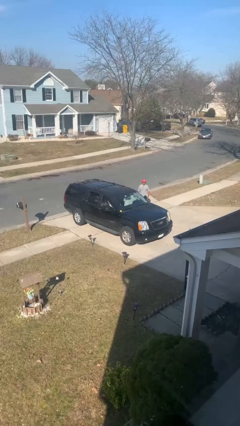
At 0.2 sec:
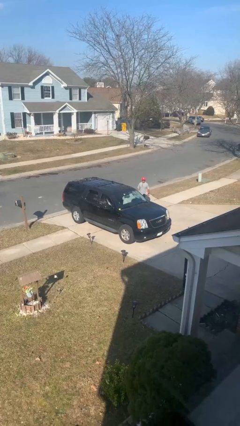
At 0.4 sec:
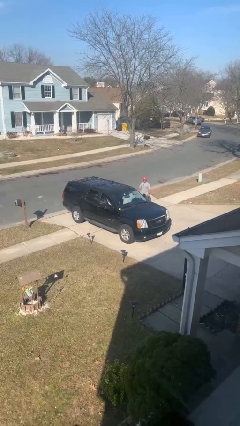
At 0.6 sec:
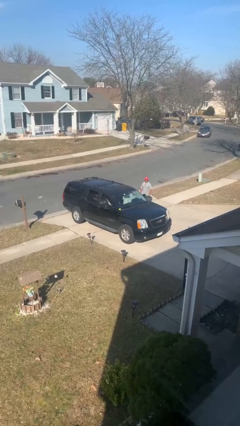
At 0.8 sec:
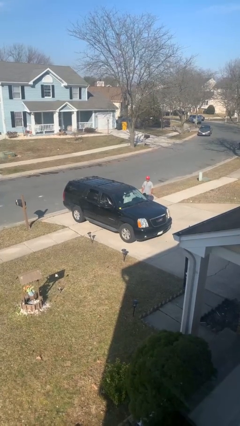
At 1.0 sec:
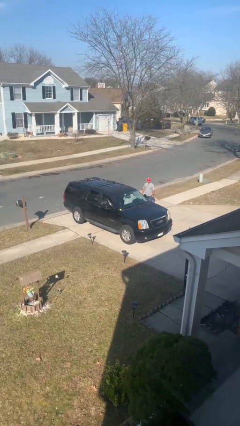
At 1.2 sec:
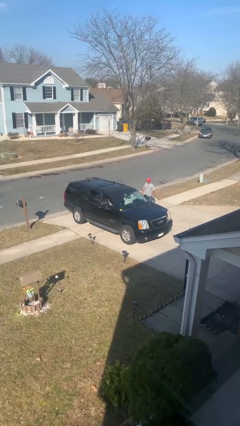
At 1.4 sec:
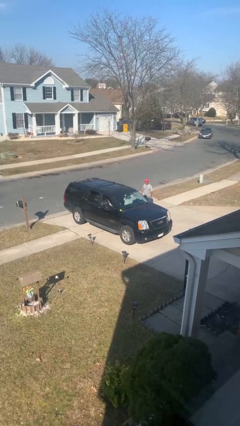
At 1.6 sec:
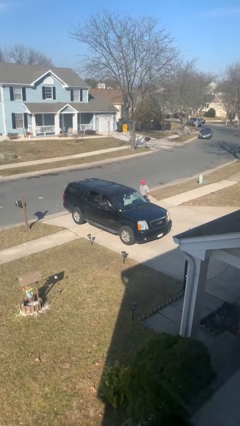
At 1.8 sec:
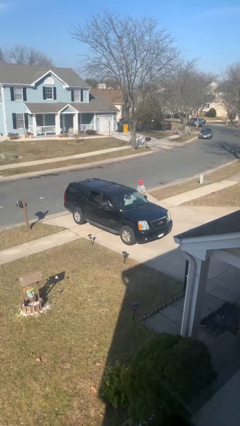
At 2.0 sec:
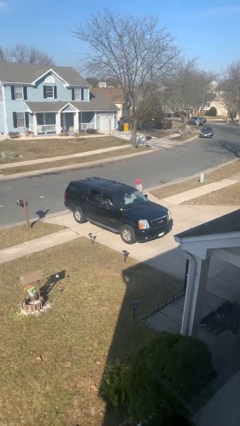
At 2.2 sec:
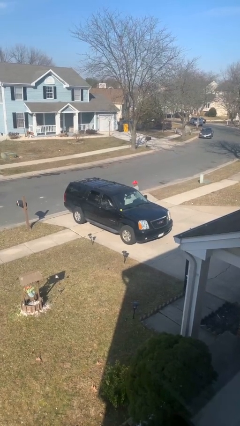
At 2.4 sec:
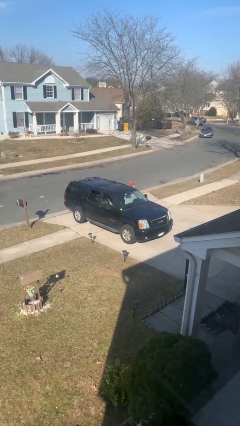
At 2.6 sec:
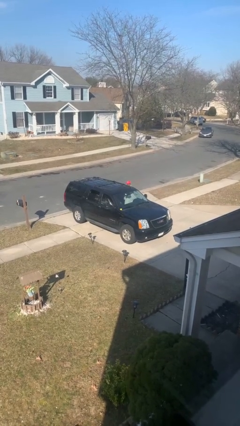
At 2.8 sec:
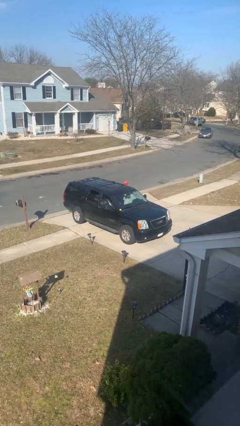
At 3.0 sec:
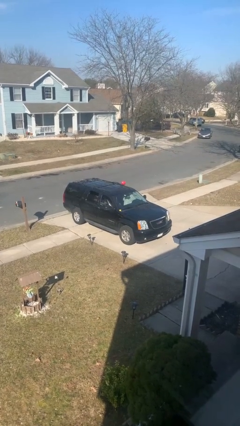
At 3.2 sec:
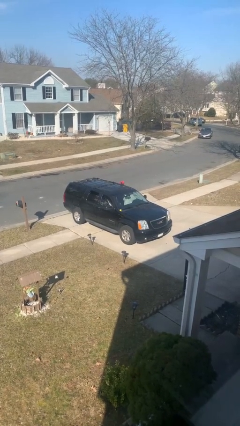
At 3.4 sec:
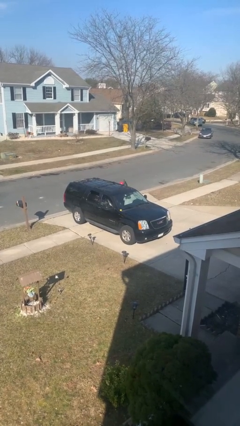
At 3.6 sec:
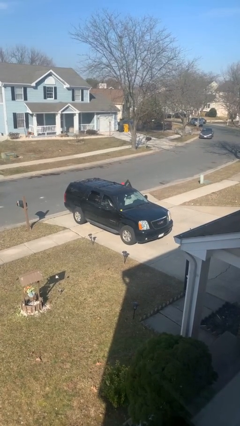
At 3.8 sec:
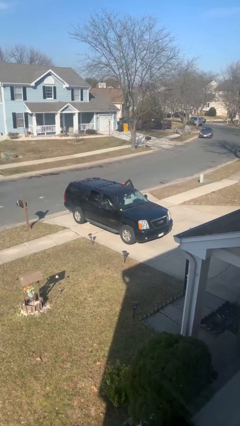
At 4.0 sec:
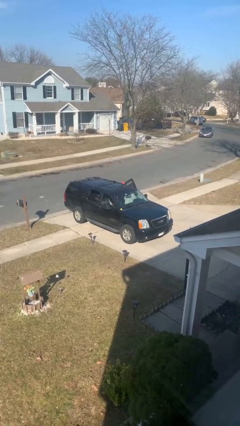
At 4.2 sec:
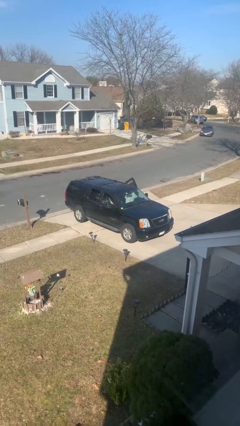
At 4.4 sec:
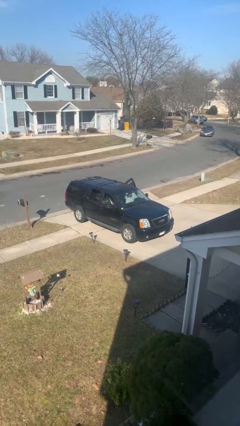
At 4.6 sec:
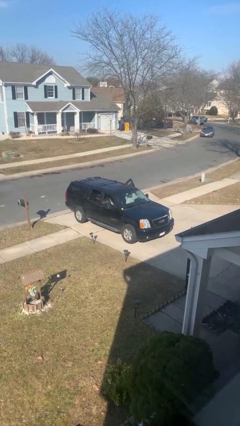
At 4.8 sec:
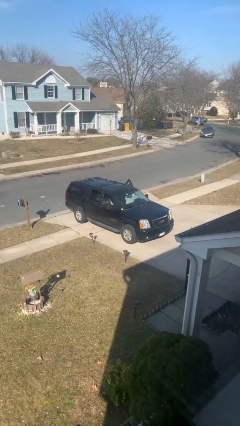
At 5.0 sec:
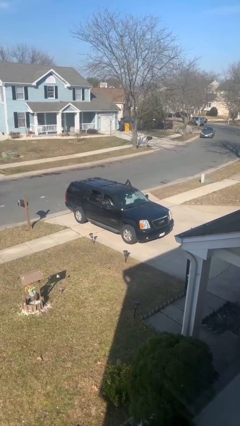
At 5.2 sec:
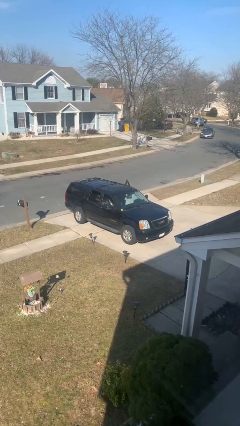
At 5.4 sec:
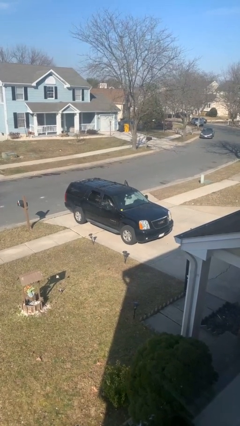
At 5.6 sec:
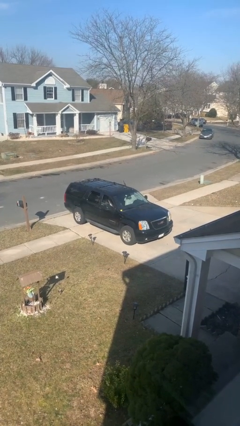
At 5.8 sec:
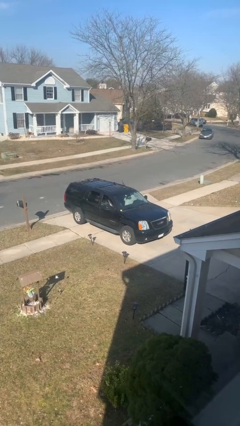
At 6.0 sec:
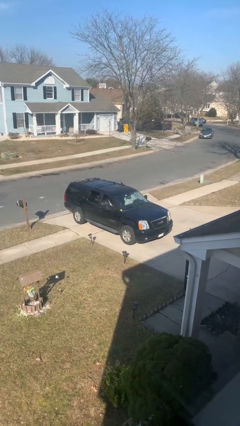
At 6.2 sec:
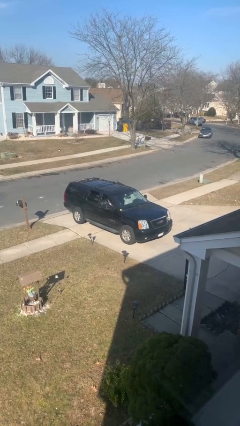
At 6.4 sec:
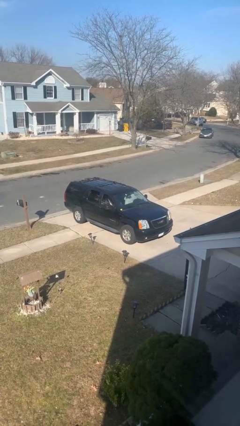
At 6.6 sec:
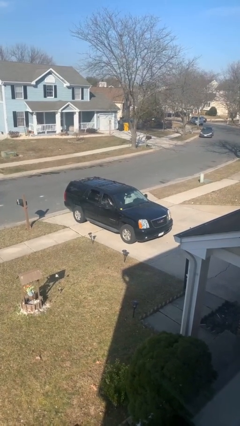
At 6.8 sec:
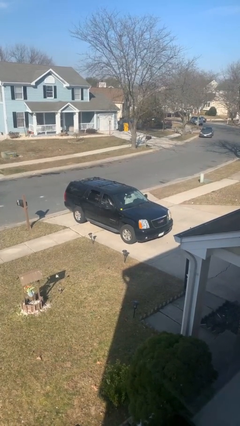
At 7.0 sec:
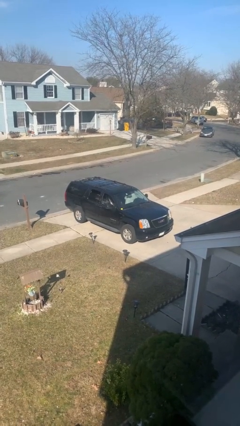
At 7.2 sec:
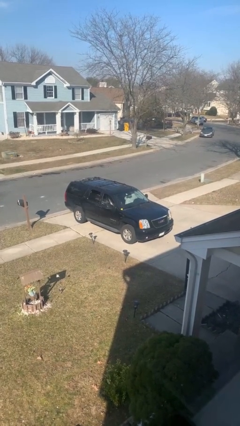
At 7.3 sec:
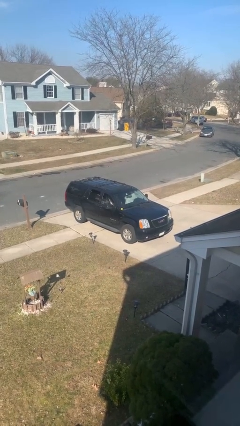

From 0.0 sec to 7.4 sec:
car picks up person

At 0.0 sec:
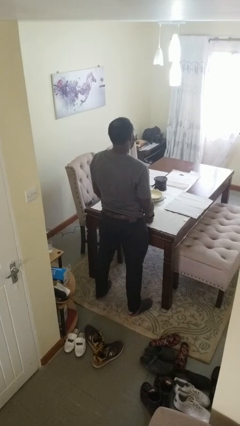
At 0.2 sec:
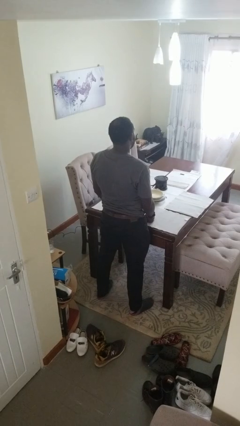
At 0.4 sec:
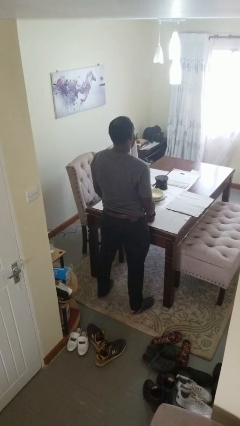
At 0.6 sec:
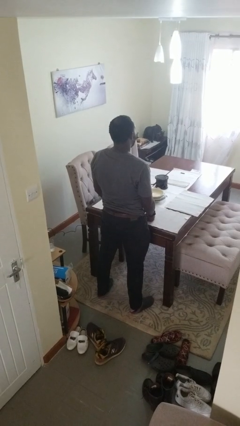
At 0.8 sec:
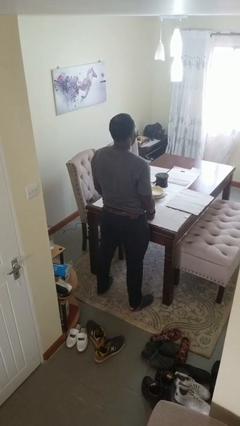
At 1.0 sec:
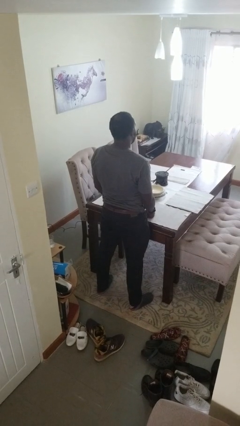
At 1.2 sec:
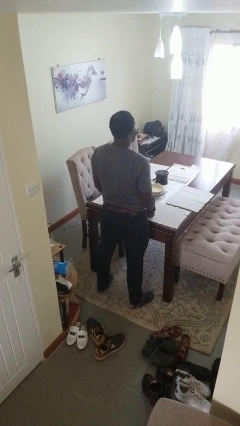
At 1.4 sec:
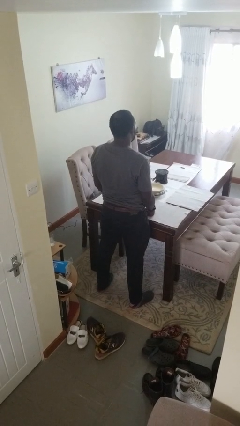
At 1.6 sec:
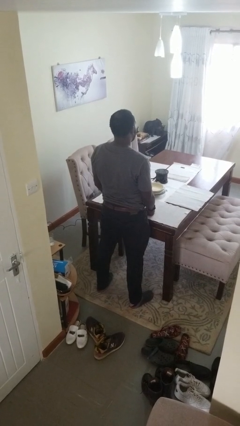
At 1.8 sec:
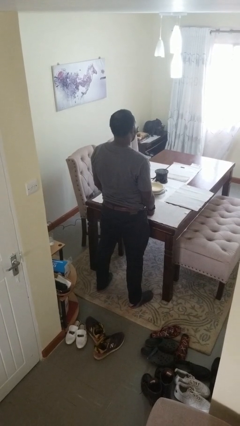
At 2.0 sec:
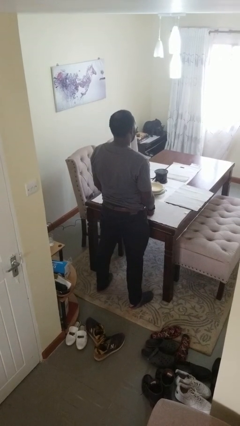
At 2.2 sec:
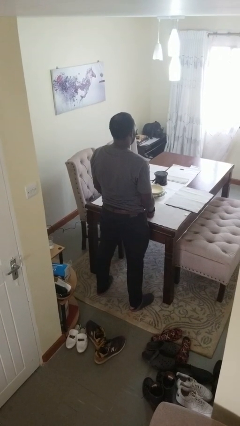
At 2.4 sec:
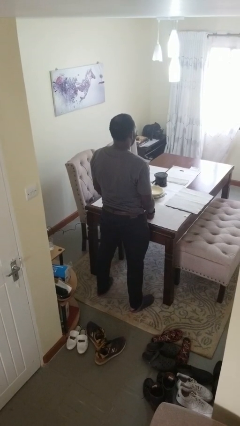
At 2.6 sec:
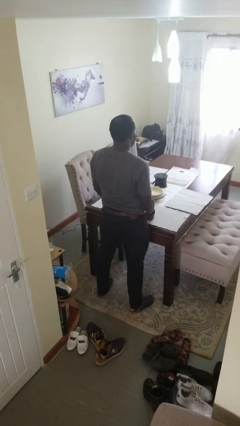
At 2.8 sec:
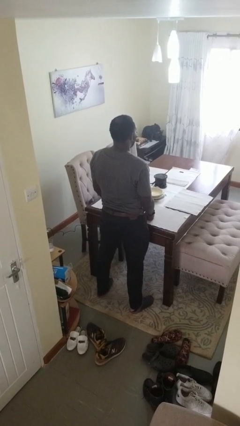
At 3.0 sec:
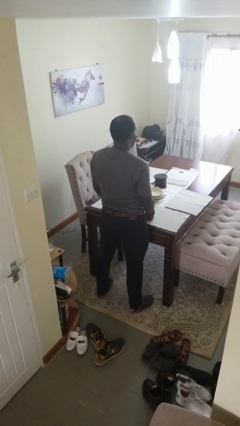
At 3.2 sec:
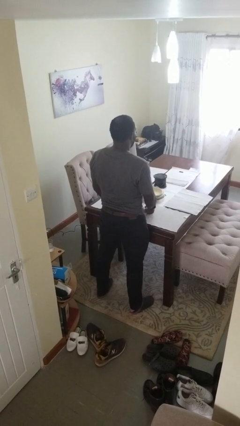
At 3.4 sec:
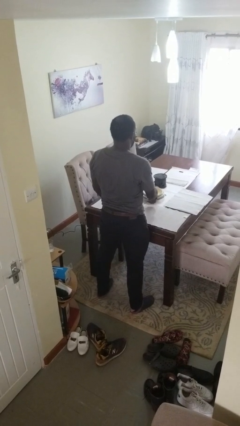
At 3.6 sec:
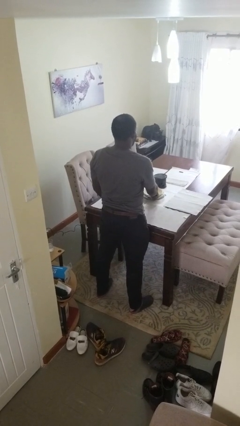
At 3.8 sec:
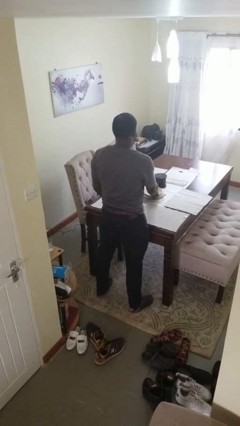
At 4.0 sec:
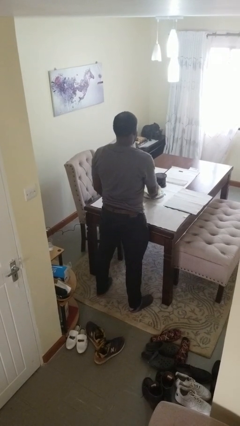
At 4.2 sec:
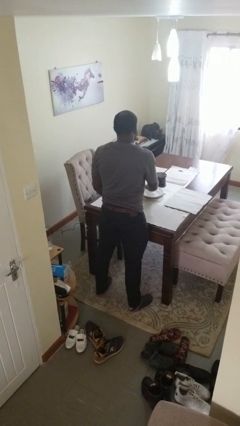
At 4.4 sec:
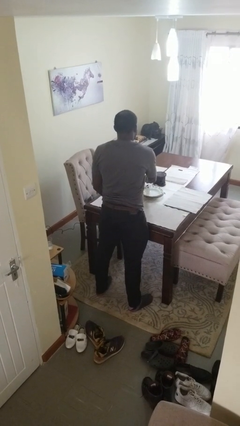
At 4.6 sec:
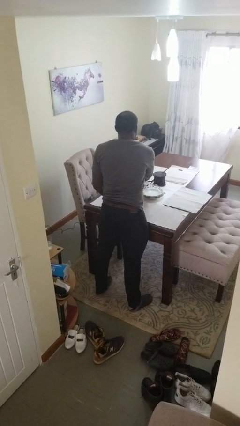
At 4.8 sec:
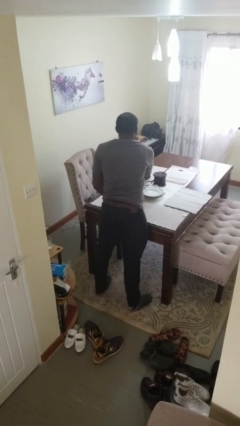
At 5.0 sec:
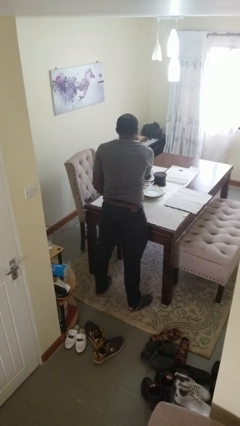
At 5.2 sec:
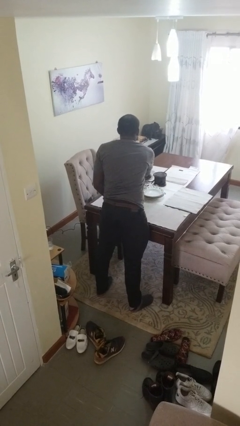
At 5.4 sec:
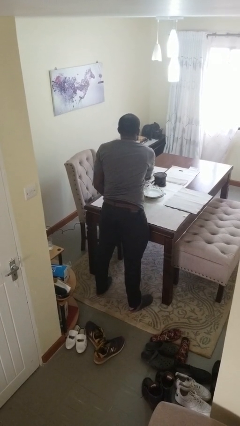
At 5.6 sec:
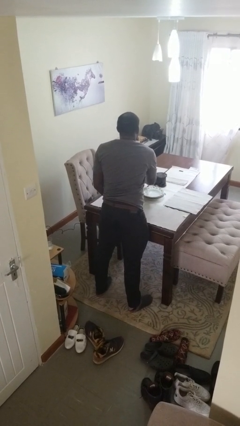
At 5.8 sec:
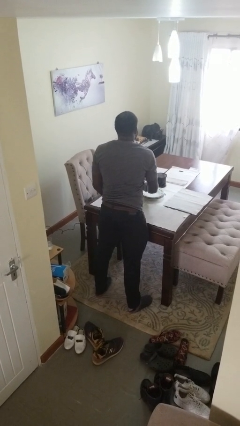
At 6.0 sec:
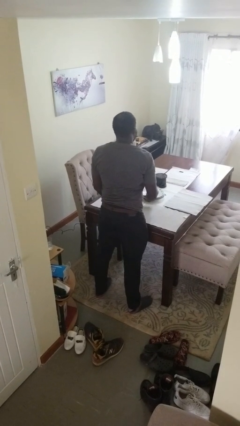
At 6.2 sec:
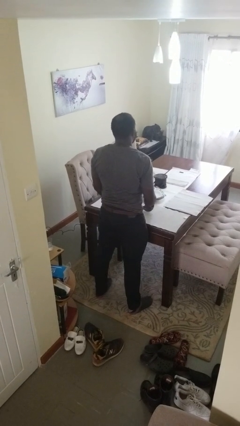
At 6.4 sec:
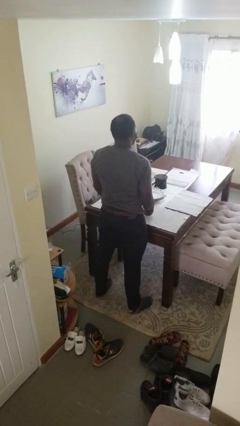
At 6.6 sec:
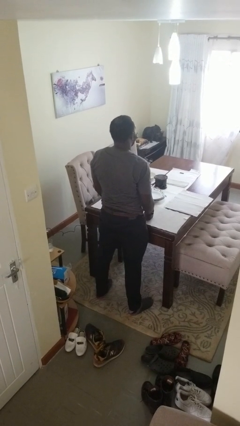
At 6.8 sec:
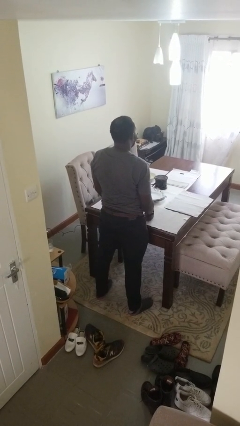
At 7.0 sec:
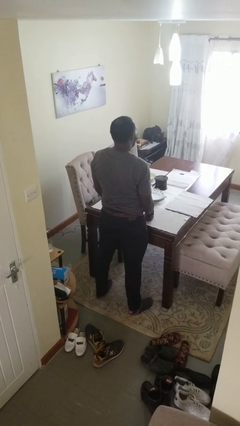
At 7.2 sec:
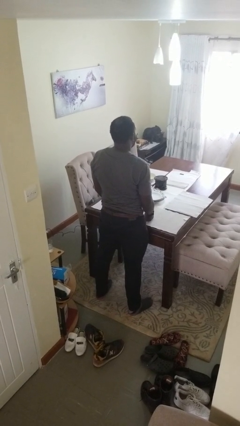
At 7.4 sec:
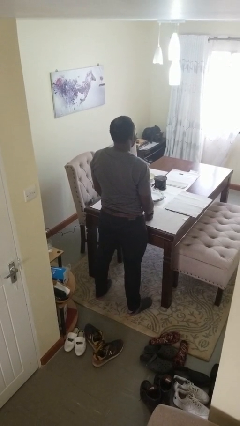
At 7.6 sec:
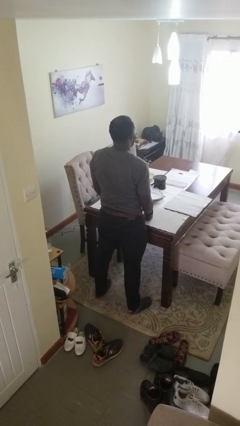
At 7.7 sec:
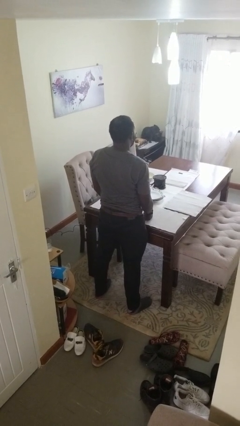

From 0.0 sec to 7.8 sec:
person sets table

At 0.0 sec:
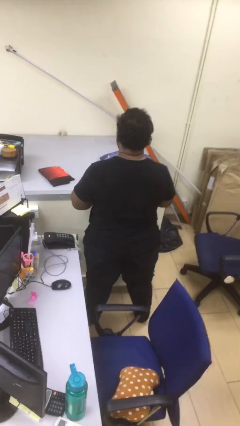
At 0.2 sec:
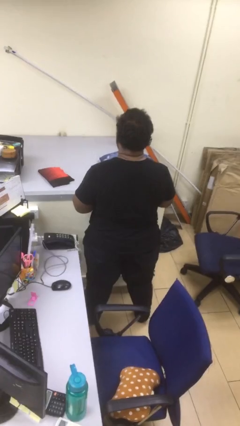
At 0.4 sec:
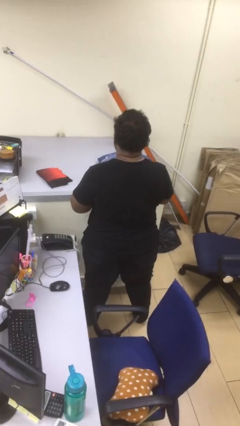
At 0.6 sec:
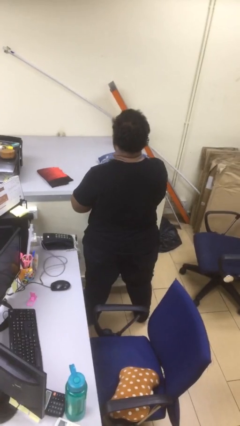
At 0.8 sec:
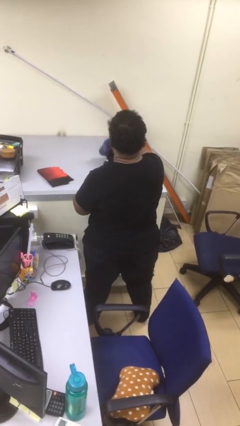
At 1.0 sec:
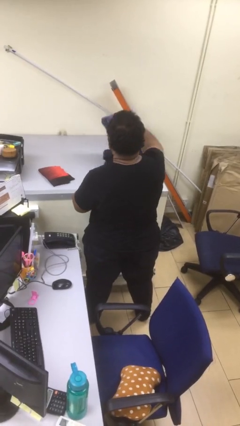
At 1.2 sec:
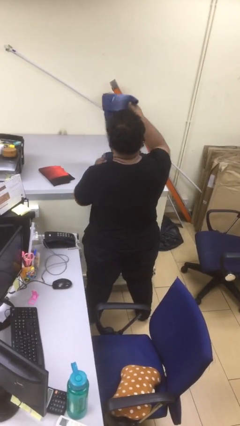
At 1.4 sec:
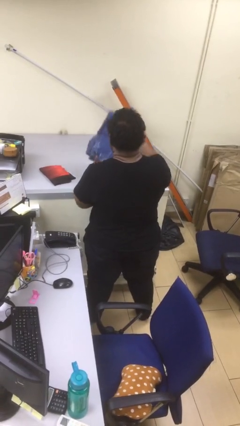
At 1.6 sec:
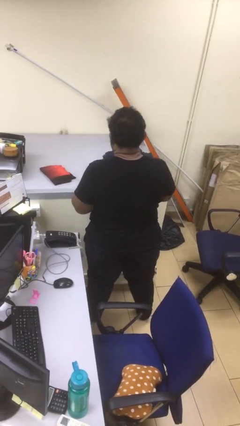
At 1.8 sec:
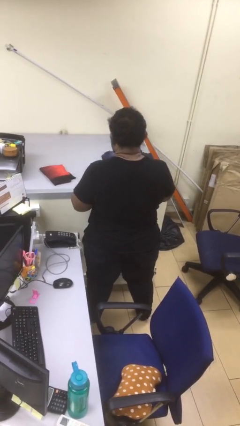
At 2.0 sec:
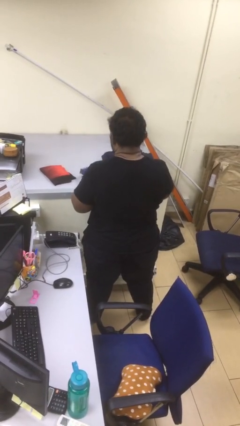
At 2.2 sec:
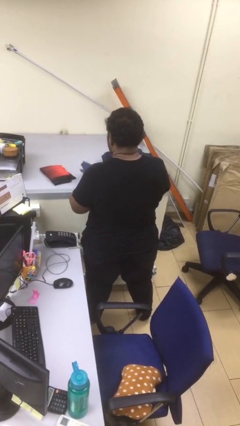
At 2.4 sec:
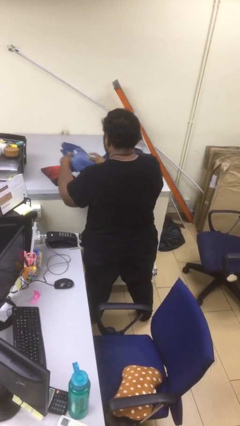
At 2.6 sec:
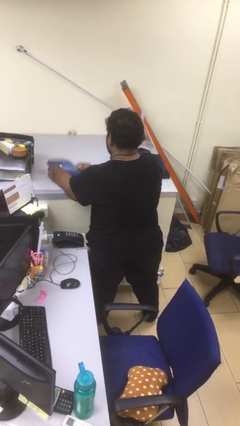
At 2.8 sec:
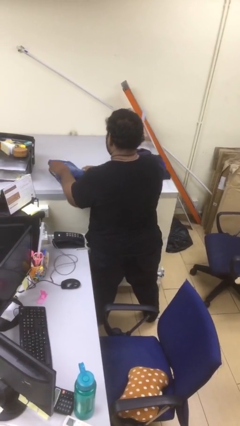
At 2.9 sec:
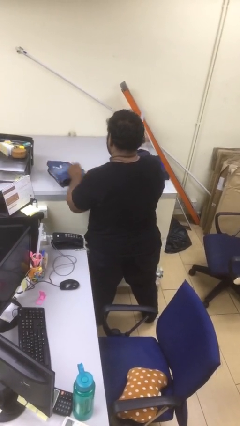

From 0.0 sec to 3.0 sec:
person folds pants
